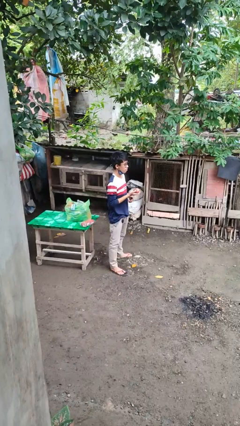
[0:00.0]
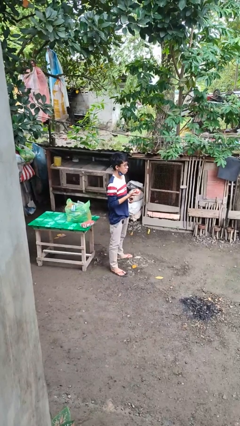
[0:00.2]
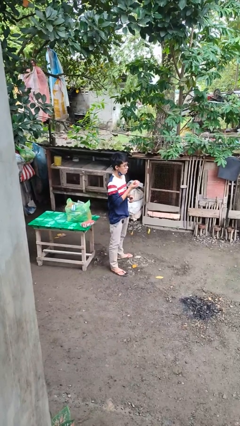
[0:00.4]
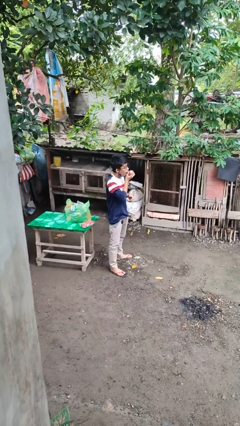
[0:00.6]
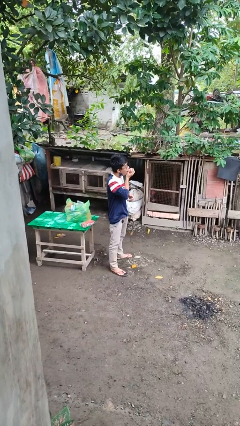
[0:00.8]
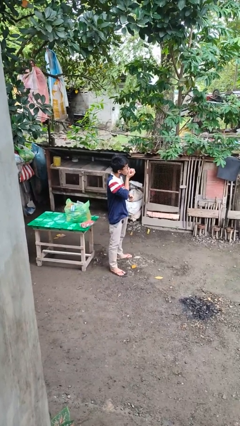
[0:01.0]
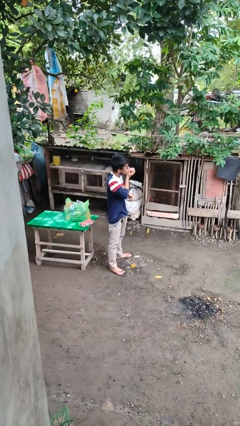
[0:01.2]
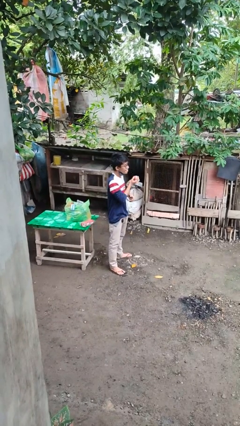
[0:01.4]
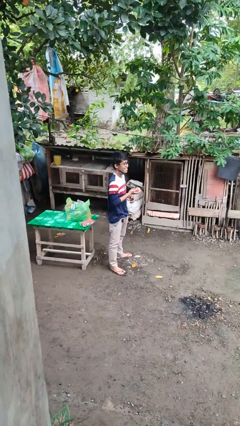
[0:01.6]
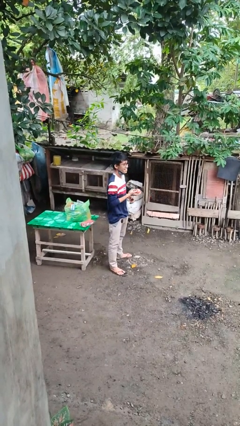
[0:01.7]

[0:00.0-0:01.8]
person eats apple

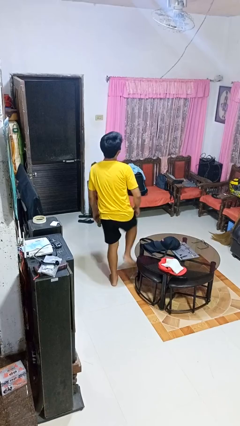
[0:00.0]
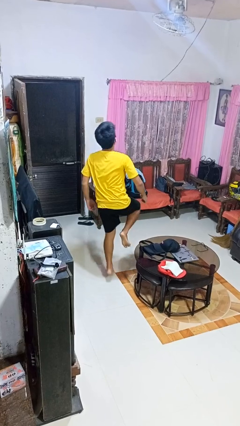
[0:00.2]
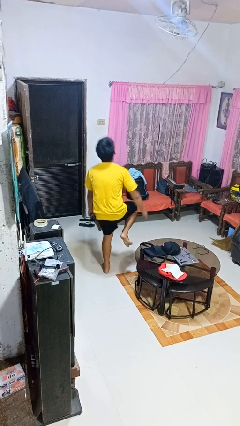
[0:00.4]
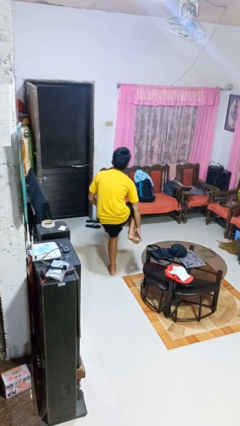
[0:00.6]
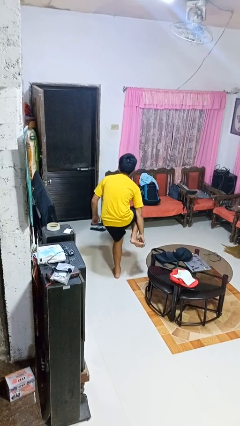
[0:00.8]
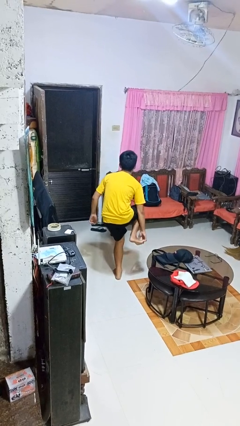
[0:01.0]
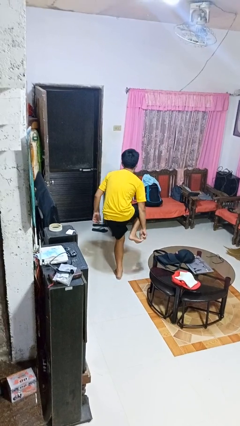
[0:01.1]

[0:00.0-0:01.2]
person trips on object on floor

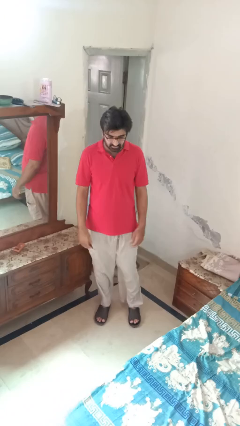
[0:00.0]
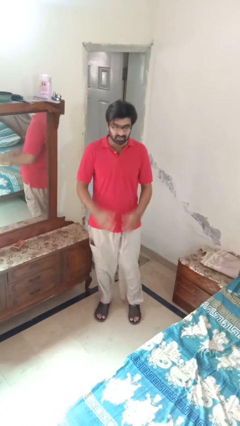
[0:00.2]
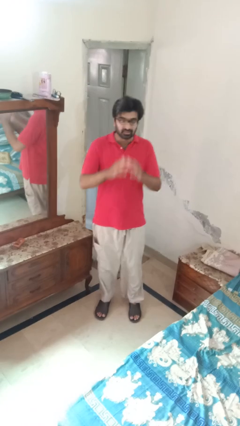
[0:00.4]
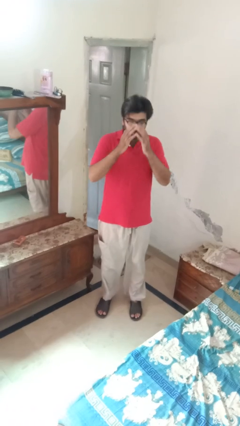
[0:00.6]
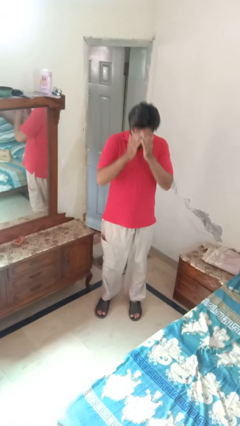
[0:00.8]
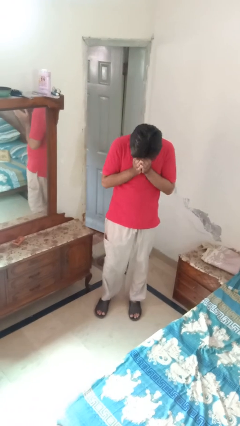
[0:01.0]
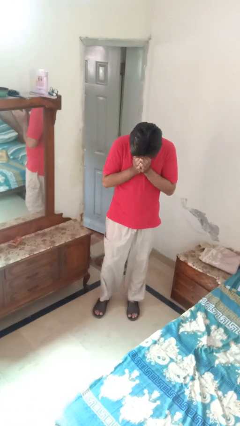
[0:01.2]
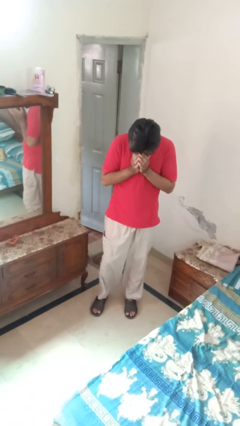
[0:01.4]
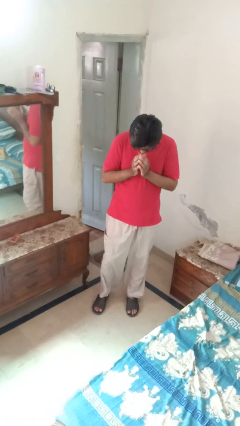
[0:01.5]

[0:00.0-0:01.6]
person sneezes into hand

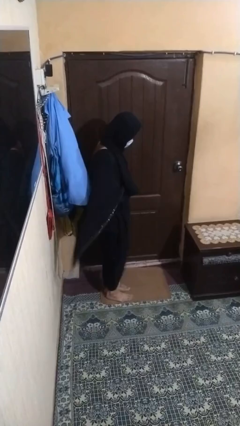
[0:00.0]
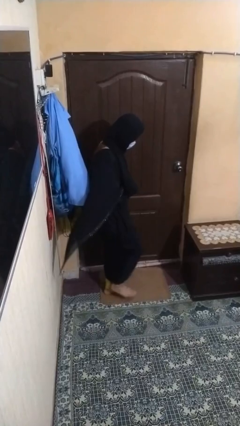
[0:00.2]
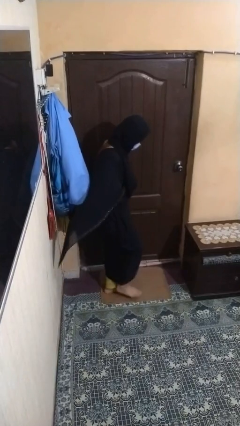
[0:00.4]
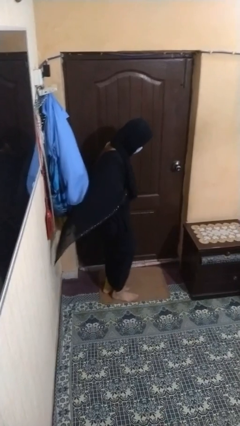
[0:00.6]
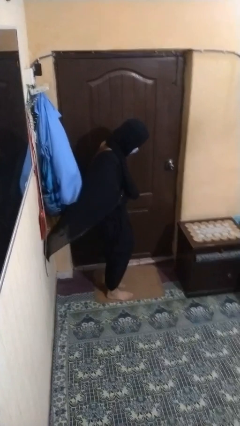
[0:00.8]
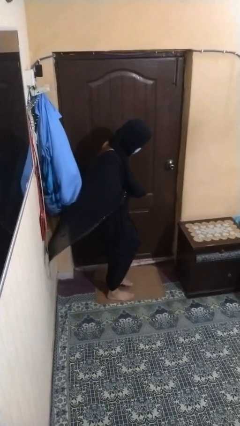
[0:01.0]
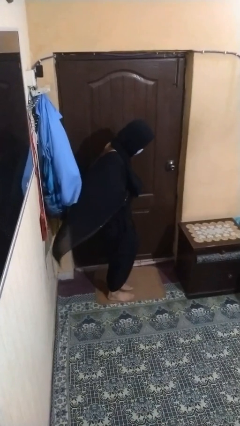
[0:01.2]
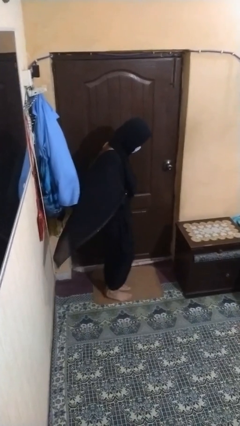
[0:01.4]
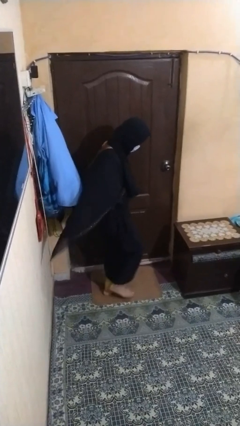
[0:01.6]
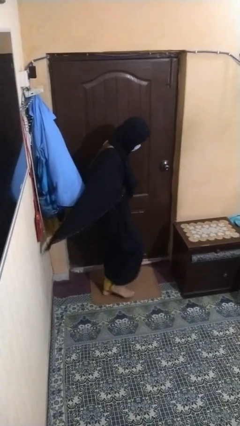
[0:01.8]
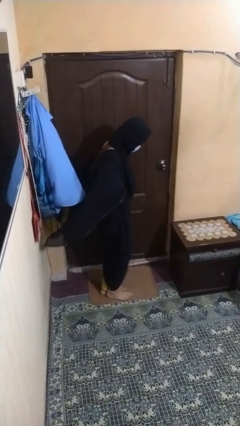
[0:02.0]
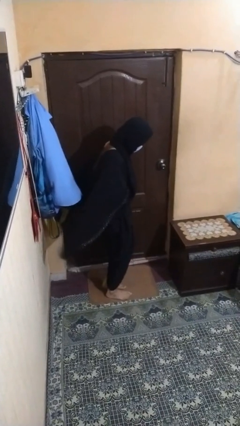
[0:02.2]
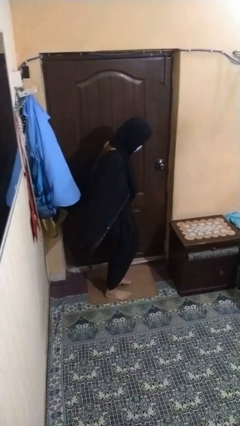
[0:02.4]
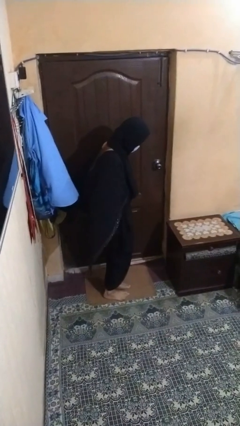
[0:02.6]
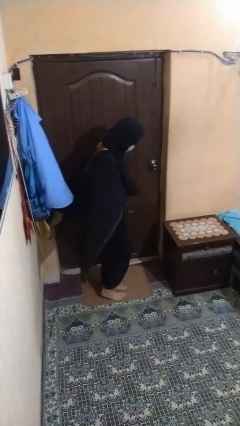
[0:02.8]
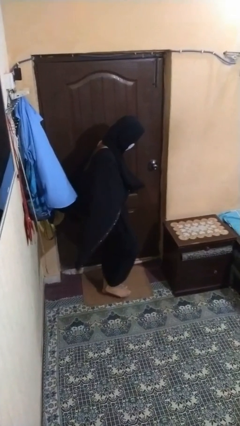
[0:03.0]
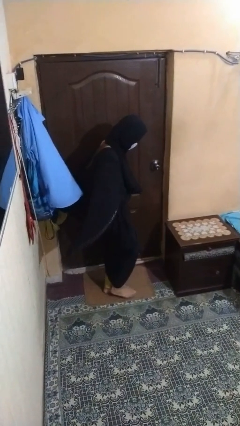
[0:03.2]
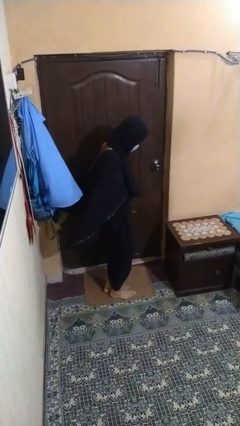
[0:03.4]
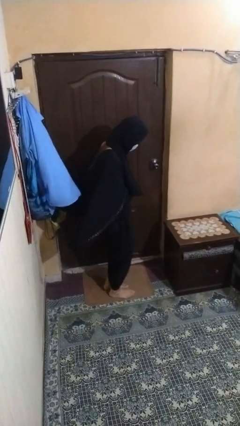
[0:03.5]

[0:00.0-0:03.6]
person walks tiptoe

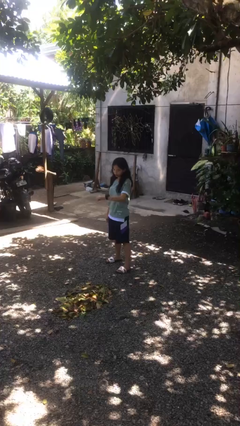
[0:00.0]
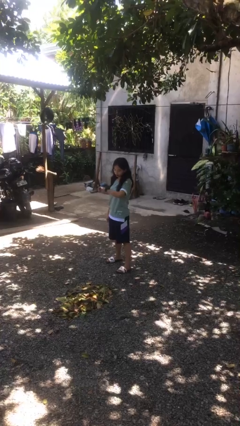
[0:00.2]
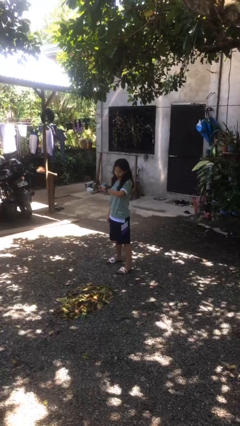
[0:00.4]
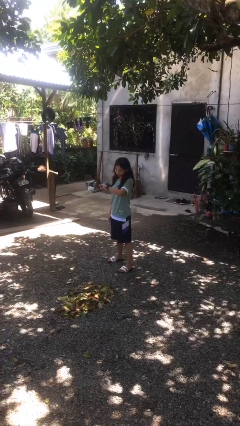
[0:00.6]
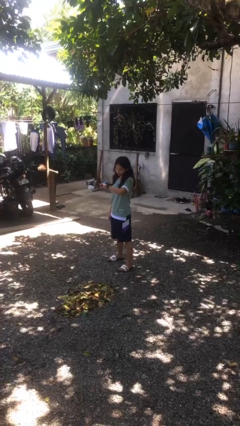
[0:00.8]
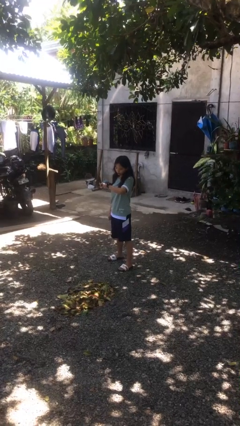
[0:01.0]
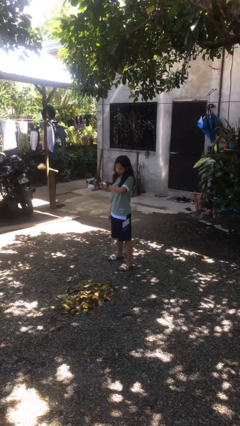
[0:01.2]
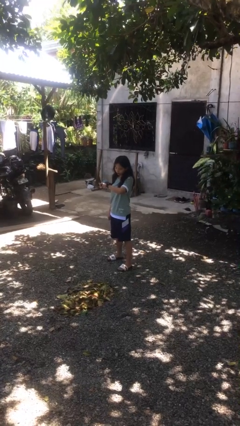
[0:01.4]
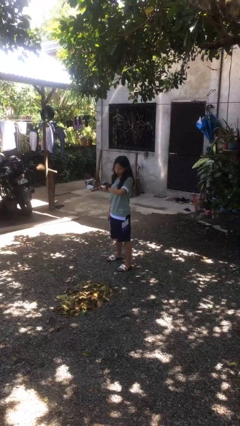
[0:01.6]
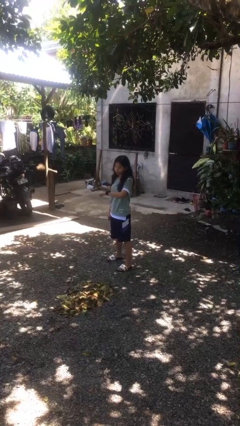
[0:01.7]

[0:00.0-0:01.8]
person looks at wristwatch

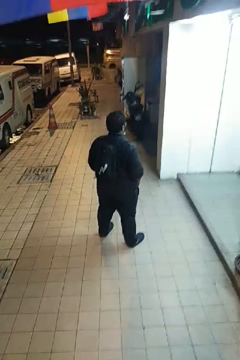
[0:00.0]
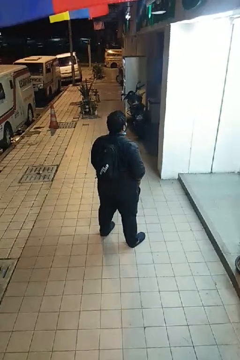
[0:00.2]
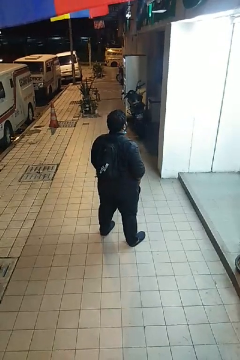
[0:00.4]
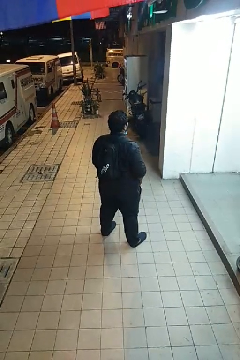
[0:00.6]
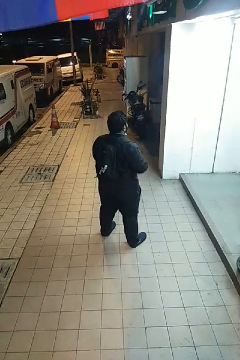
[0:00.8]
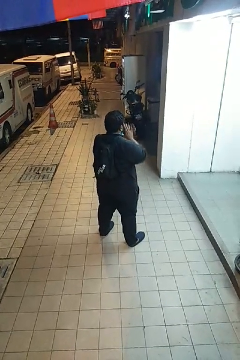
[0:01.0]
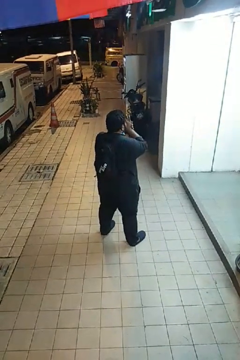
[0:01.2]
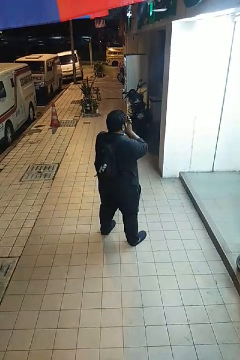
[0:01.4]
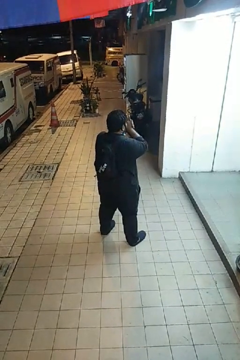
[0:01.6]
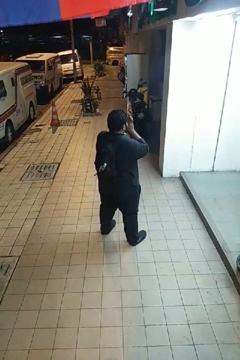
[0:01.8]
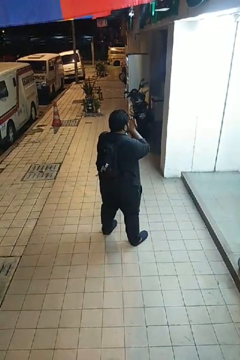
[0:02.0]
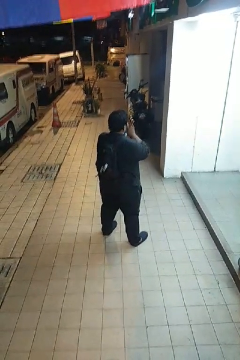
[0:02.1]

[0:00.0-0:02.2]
person blows into hands

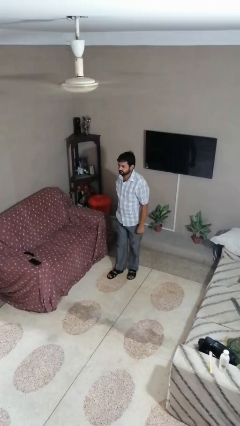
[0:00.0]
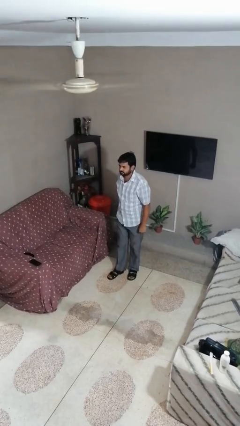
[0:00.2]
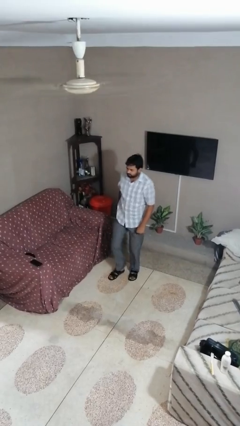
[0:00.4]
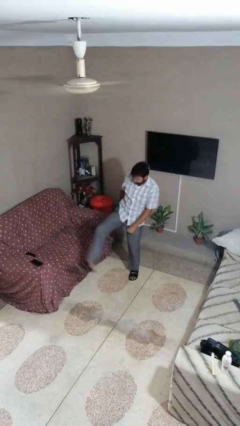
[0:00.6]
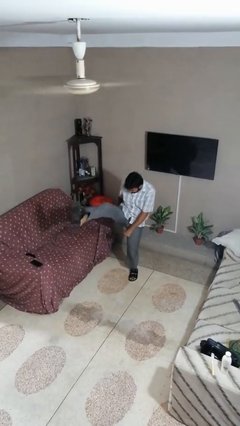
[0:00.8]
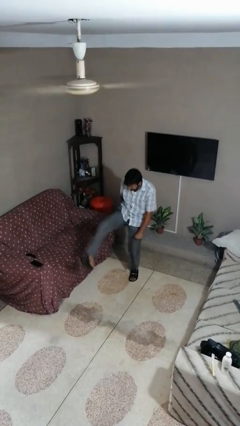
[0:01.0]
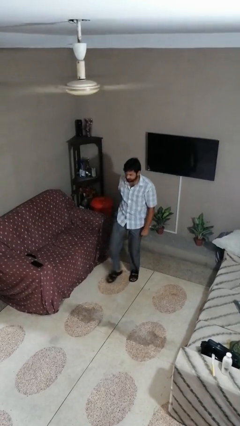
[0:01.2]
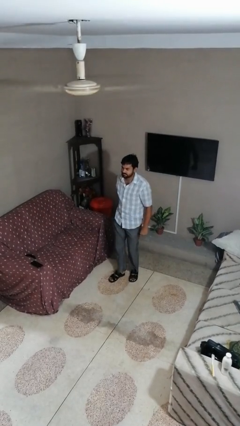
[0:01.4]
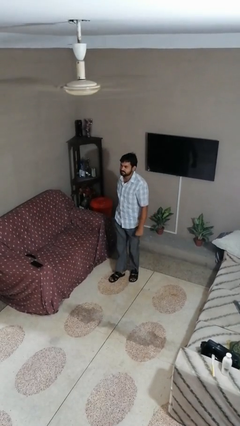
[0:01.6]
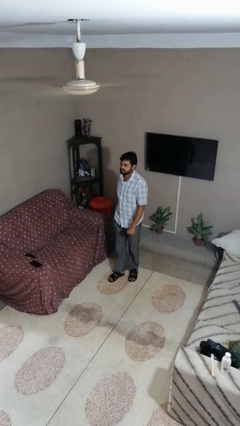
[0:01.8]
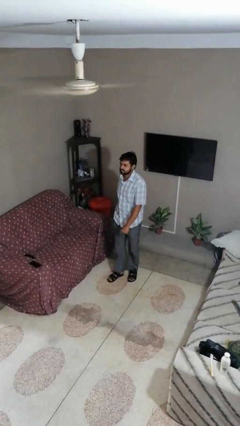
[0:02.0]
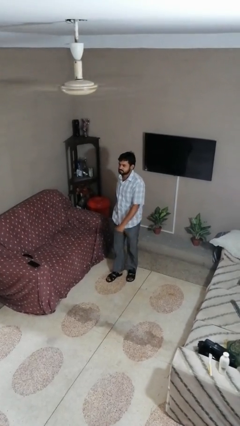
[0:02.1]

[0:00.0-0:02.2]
person karate kicks

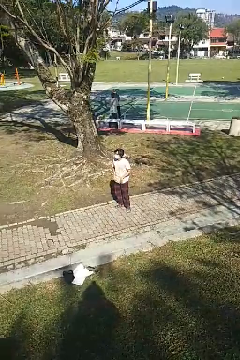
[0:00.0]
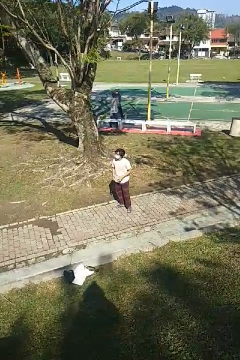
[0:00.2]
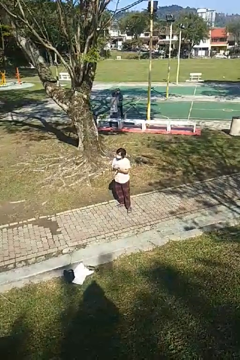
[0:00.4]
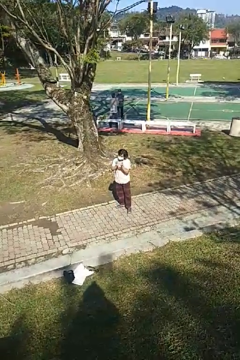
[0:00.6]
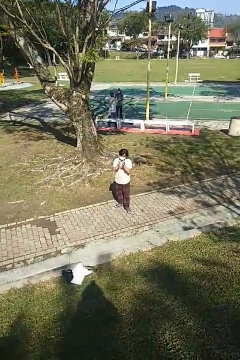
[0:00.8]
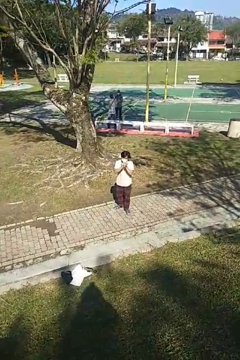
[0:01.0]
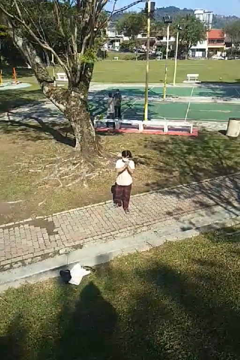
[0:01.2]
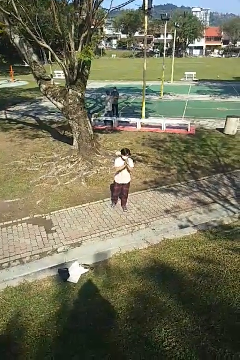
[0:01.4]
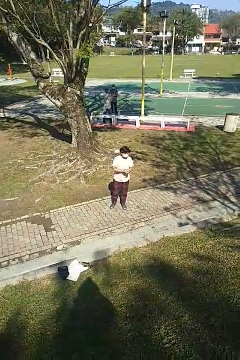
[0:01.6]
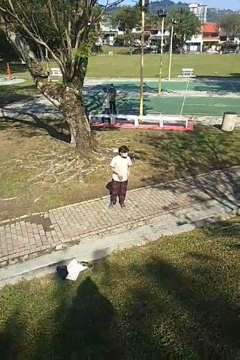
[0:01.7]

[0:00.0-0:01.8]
person claps hands

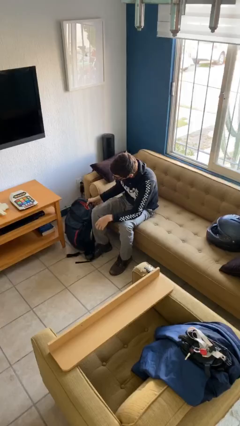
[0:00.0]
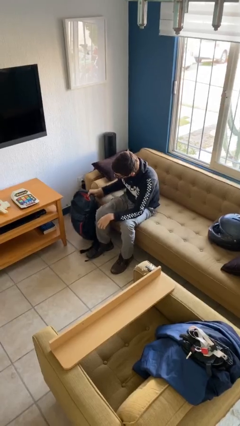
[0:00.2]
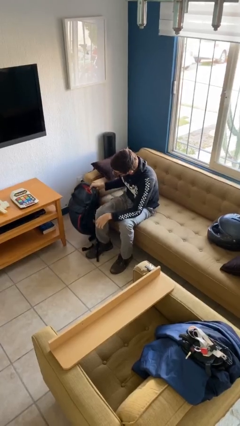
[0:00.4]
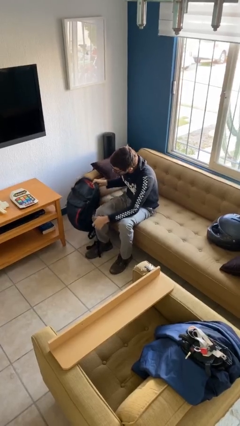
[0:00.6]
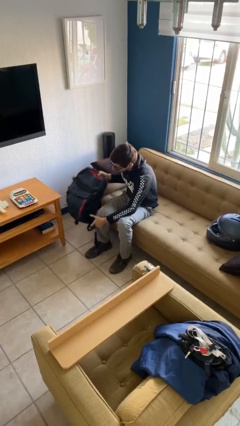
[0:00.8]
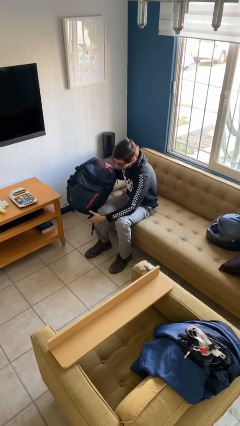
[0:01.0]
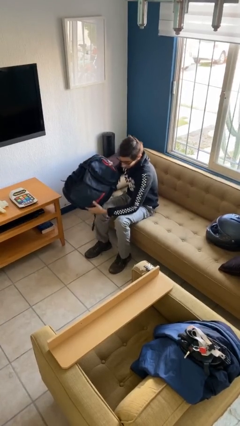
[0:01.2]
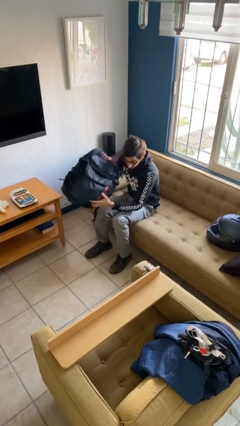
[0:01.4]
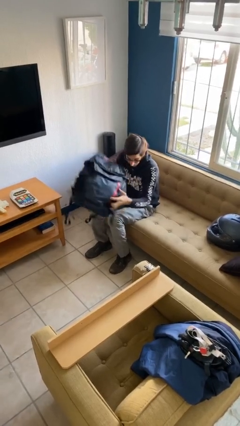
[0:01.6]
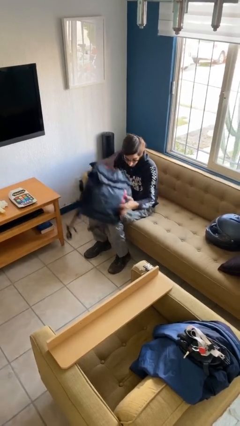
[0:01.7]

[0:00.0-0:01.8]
person picks up object from floor
